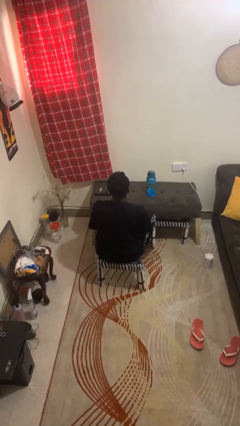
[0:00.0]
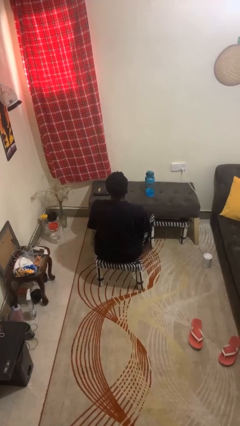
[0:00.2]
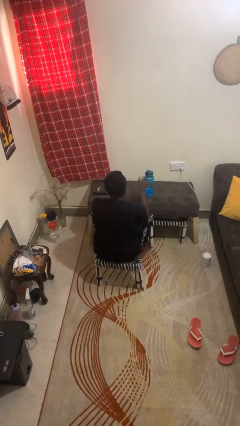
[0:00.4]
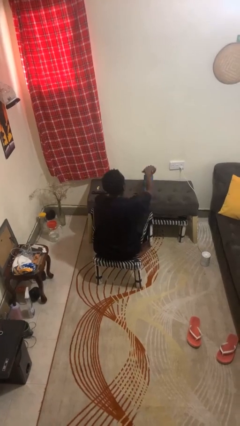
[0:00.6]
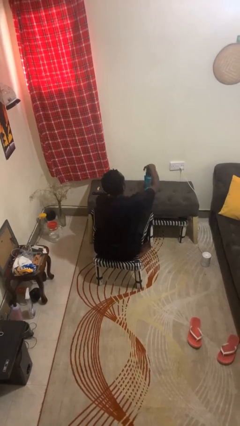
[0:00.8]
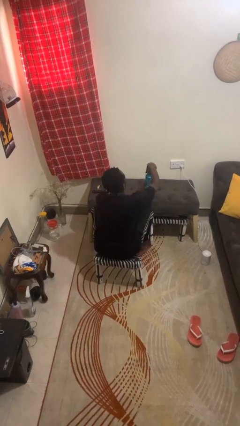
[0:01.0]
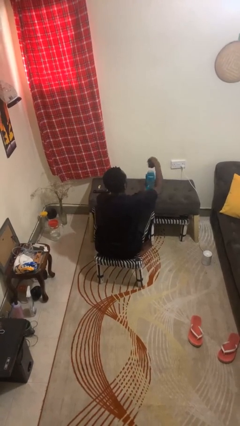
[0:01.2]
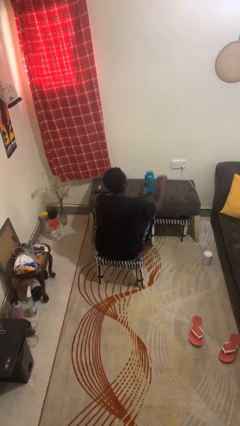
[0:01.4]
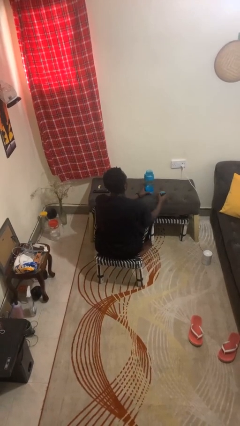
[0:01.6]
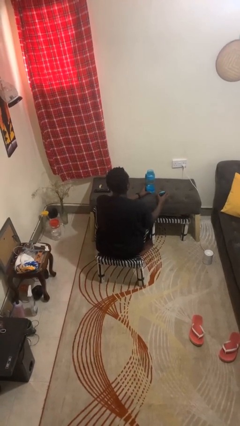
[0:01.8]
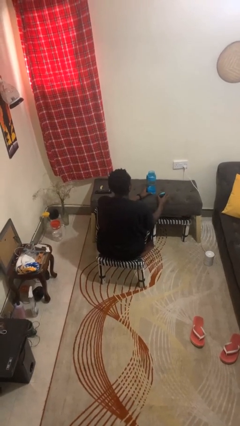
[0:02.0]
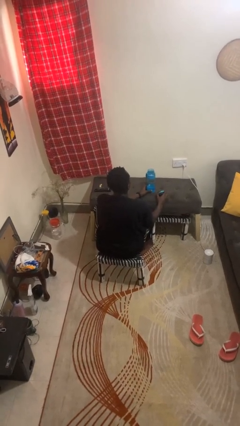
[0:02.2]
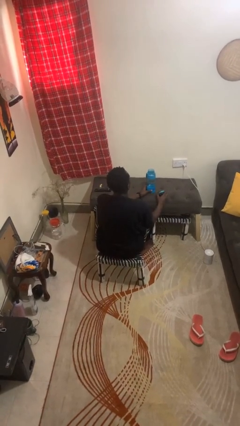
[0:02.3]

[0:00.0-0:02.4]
person opens jar

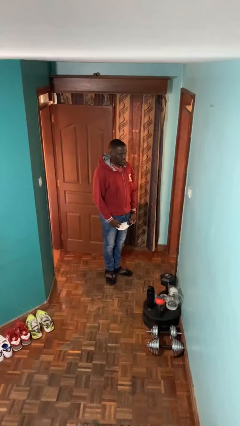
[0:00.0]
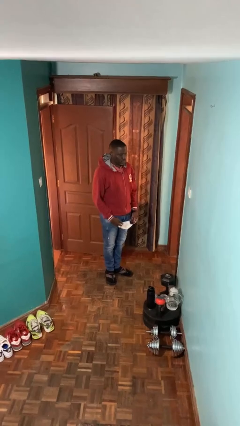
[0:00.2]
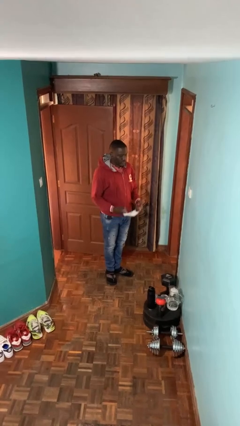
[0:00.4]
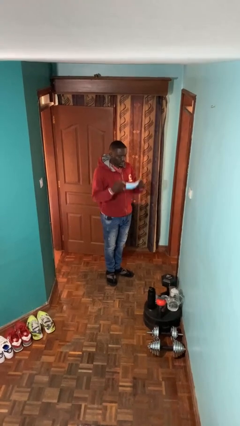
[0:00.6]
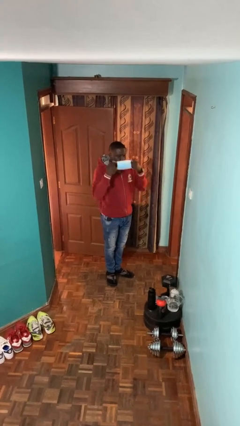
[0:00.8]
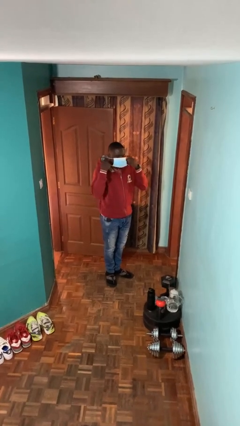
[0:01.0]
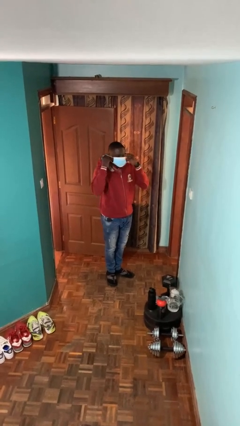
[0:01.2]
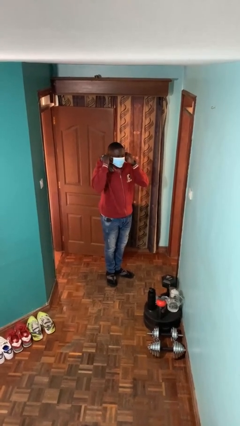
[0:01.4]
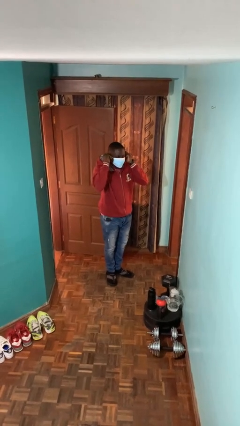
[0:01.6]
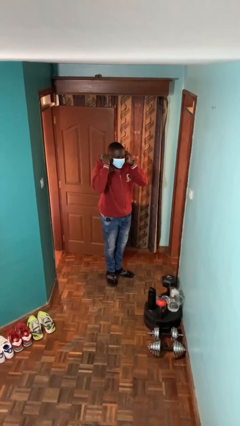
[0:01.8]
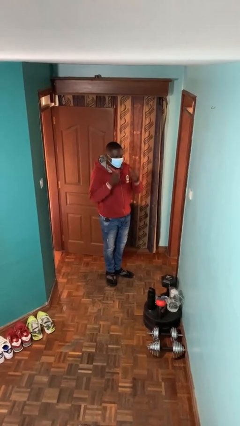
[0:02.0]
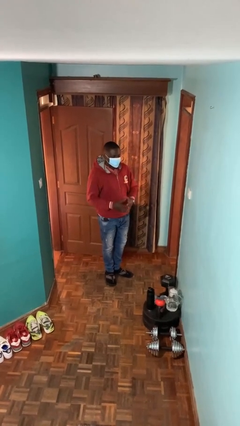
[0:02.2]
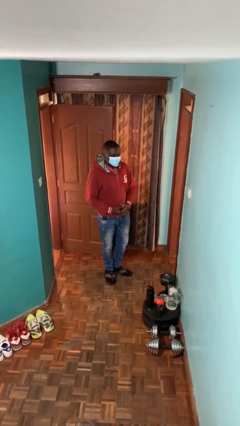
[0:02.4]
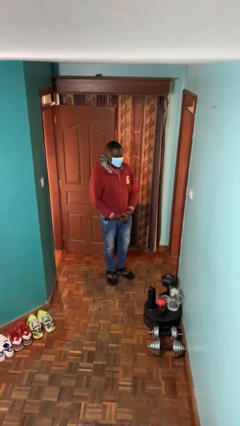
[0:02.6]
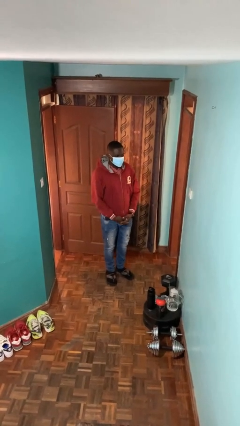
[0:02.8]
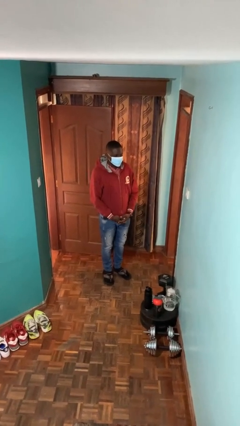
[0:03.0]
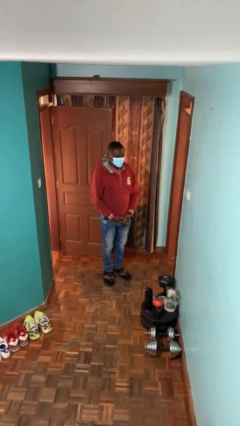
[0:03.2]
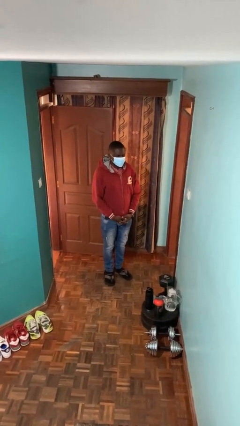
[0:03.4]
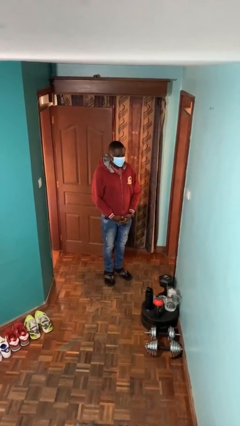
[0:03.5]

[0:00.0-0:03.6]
person puts on facemask

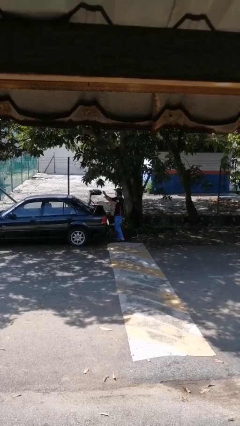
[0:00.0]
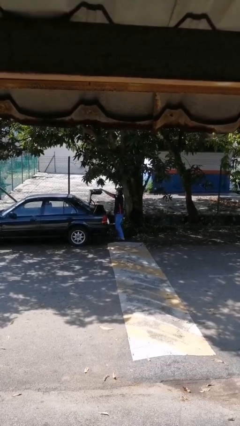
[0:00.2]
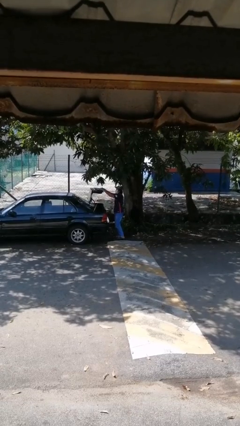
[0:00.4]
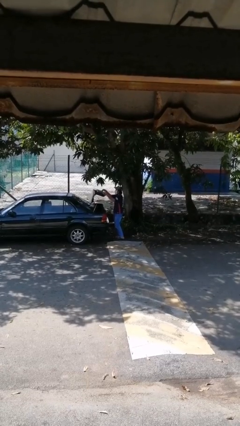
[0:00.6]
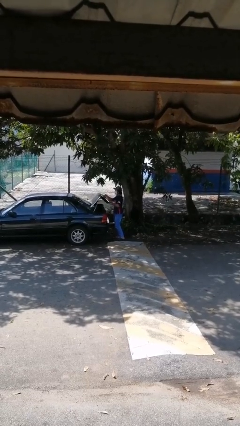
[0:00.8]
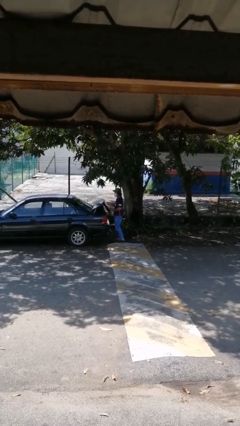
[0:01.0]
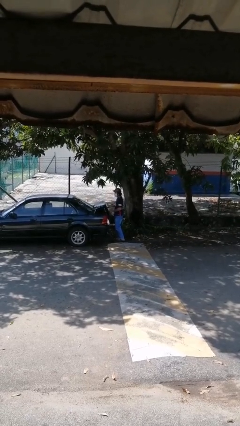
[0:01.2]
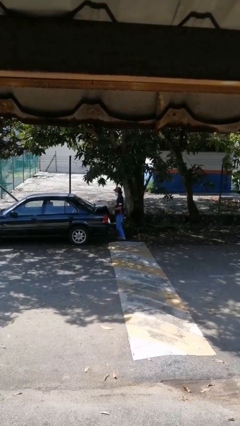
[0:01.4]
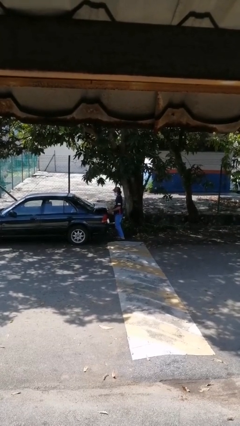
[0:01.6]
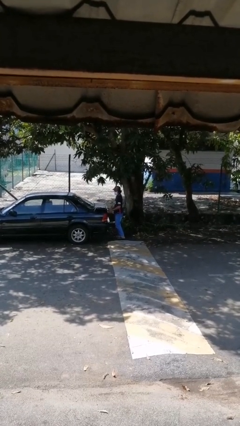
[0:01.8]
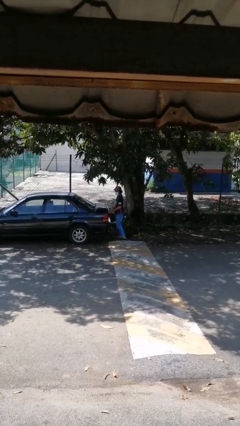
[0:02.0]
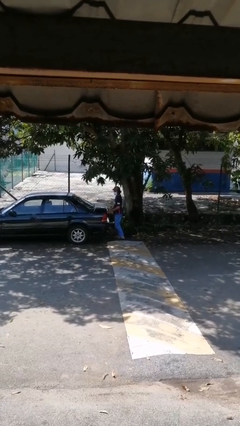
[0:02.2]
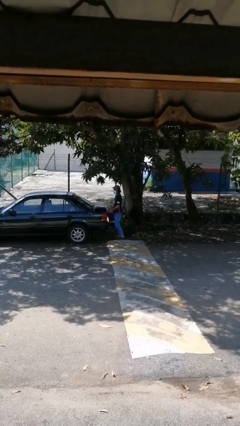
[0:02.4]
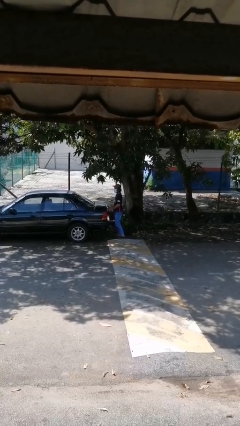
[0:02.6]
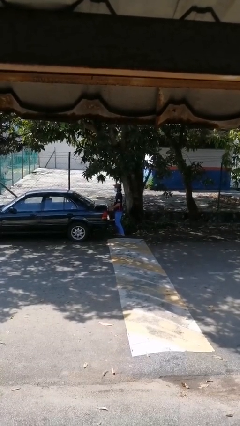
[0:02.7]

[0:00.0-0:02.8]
person closes car trunk

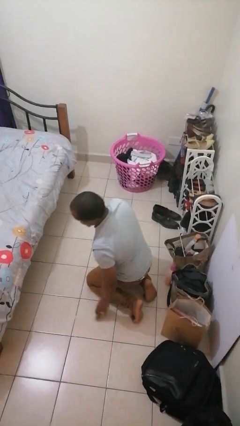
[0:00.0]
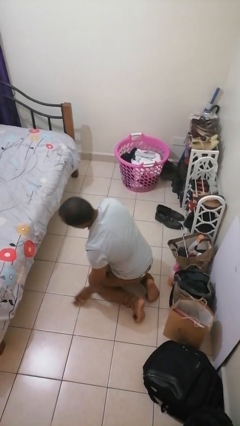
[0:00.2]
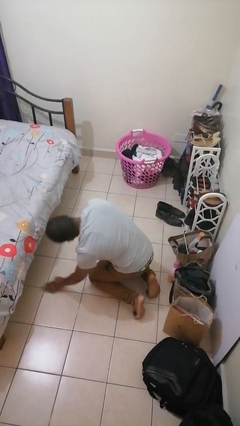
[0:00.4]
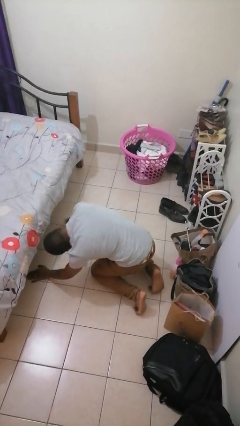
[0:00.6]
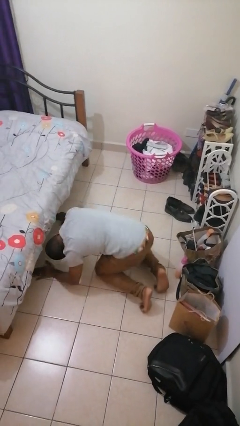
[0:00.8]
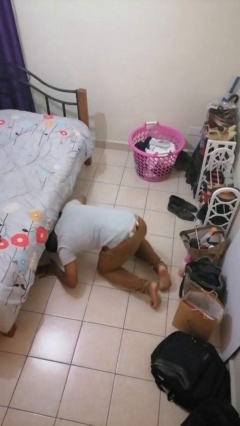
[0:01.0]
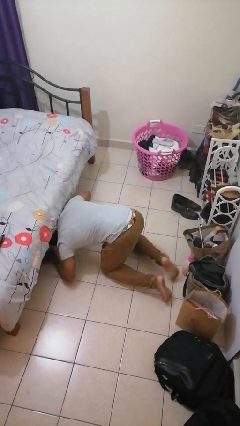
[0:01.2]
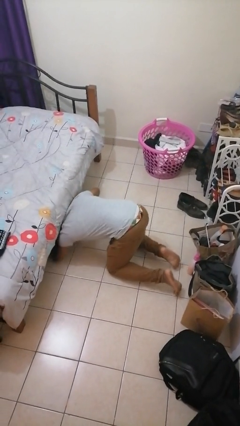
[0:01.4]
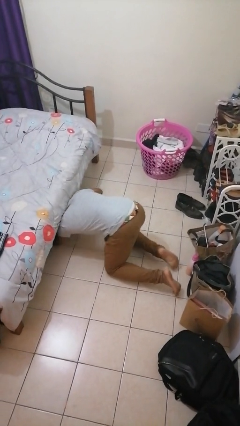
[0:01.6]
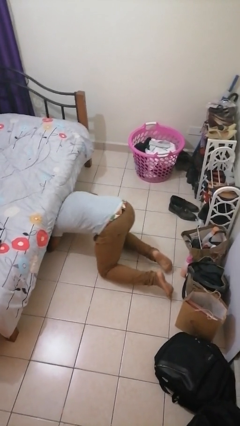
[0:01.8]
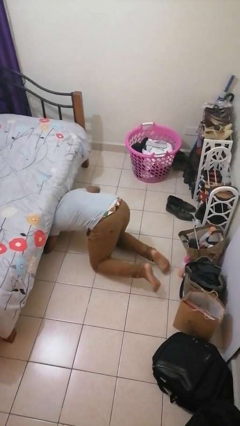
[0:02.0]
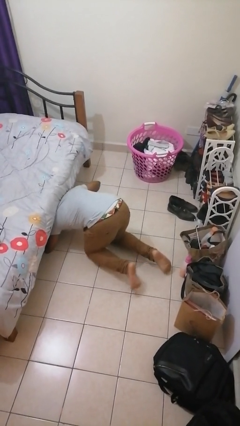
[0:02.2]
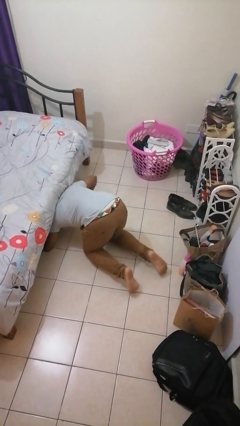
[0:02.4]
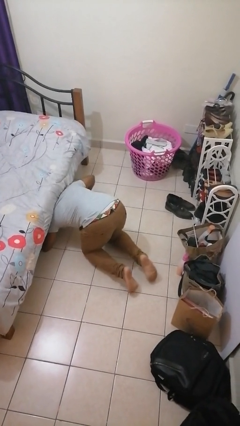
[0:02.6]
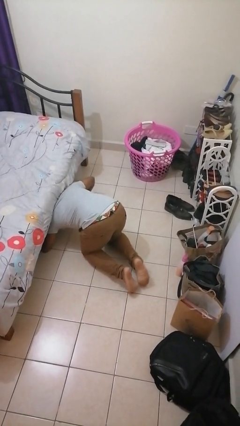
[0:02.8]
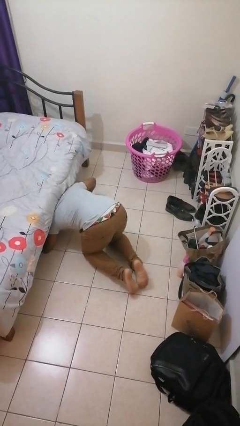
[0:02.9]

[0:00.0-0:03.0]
person searches under bed

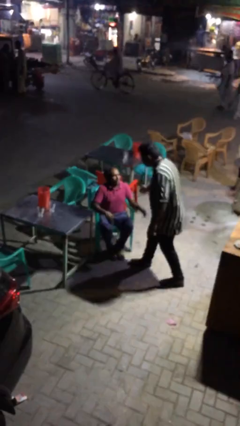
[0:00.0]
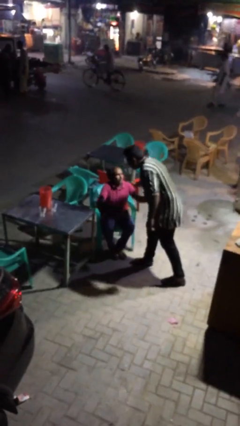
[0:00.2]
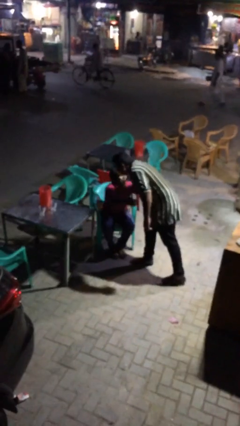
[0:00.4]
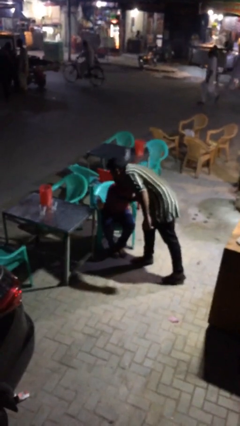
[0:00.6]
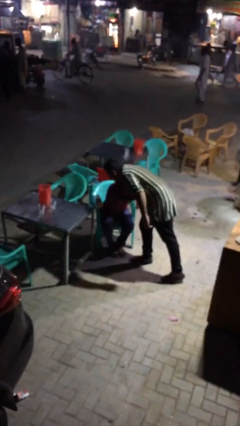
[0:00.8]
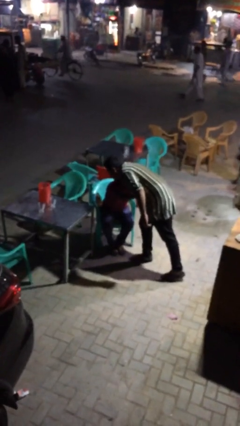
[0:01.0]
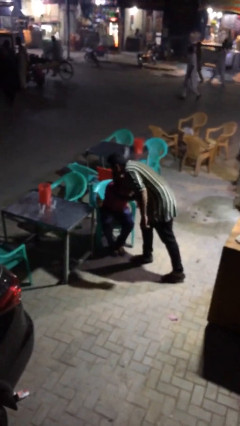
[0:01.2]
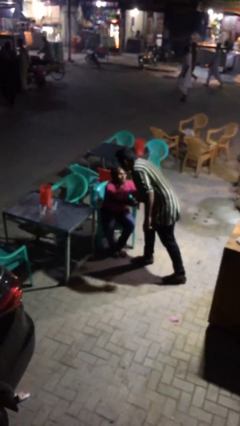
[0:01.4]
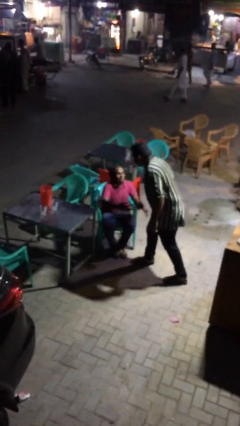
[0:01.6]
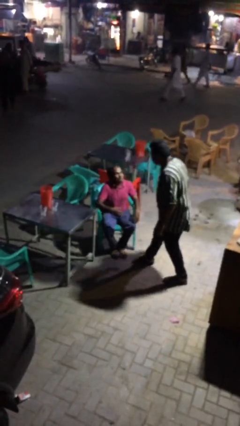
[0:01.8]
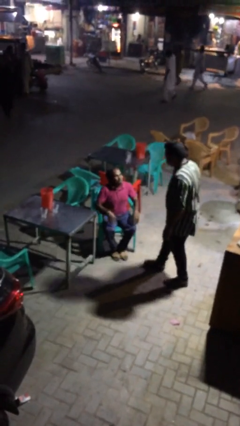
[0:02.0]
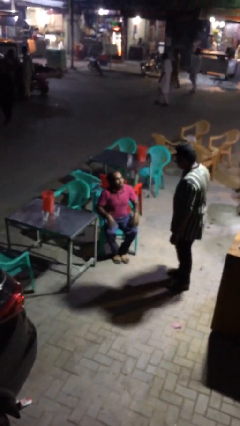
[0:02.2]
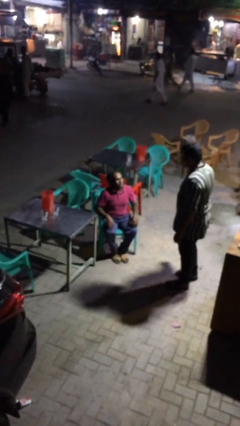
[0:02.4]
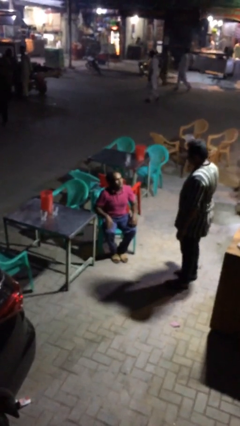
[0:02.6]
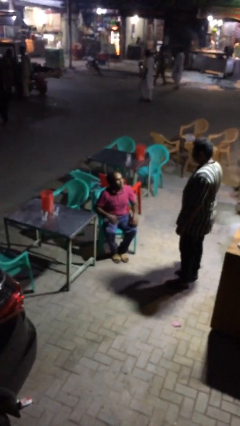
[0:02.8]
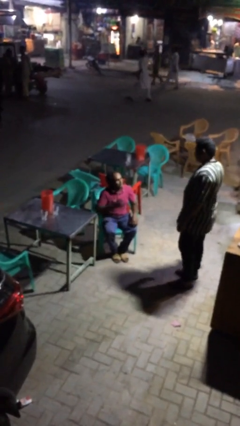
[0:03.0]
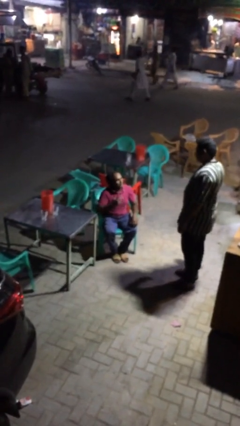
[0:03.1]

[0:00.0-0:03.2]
person embraces person

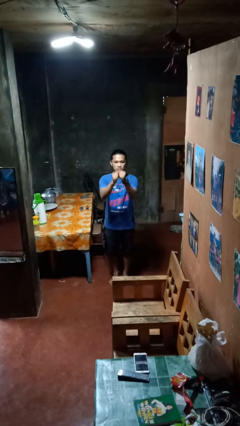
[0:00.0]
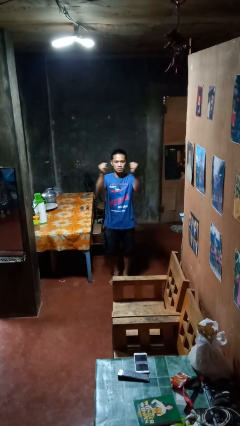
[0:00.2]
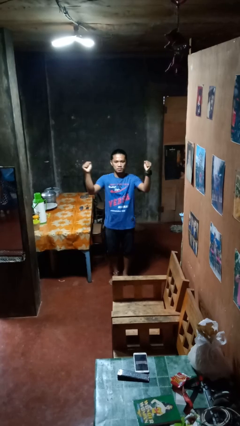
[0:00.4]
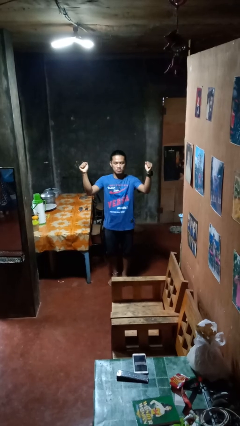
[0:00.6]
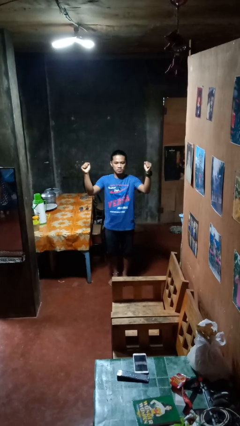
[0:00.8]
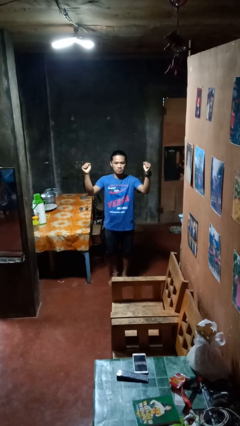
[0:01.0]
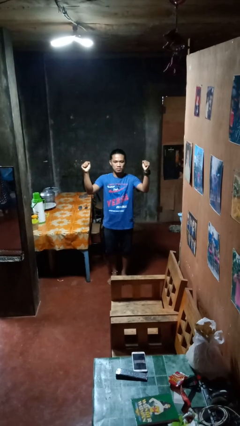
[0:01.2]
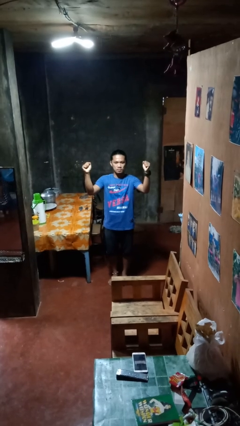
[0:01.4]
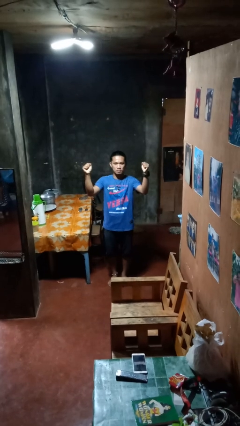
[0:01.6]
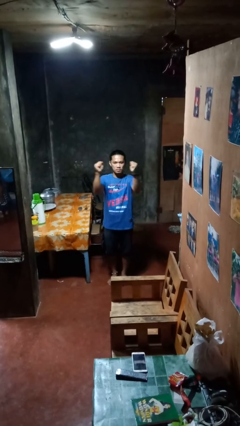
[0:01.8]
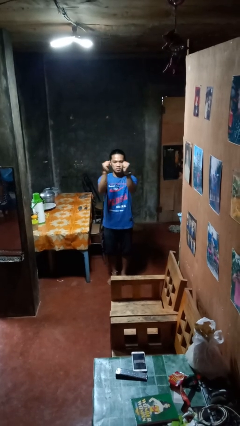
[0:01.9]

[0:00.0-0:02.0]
person gestures zoom in
